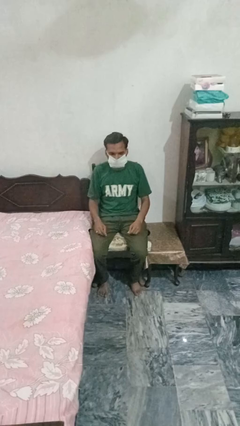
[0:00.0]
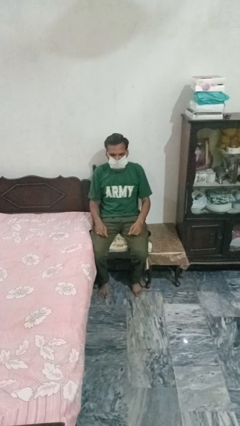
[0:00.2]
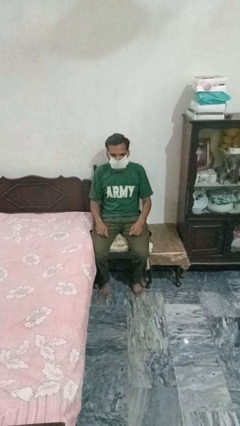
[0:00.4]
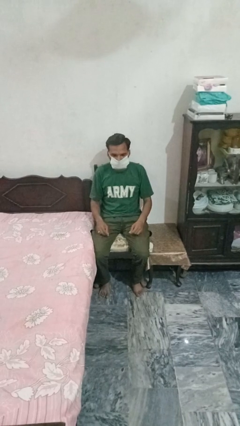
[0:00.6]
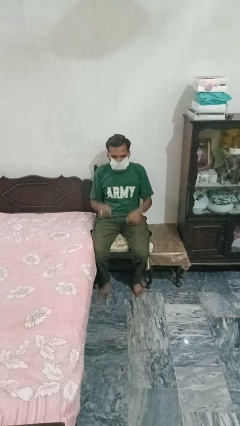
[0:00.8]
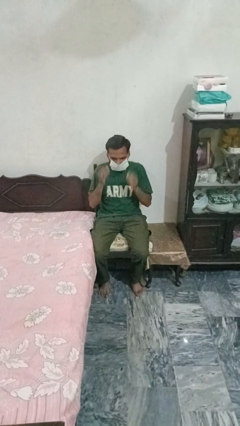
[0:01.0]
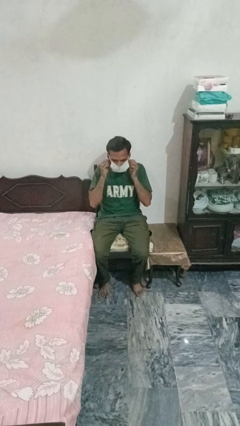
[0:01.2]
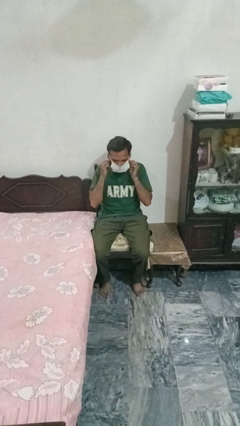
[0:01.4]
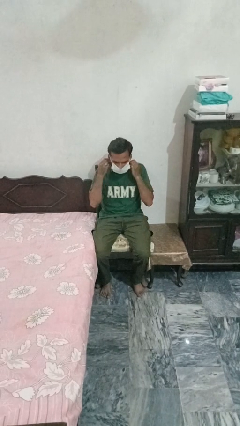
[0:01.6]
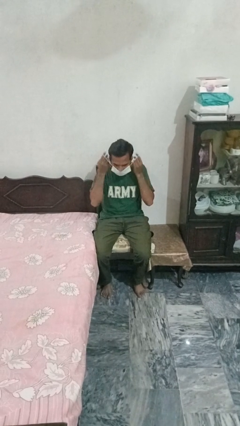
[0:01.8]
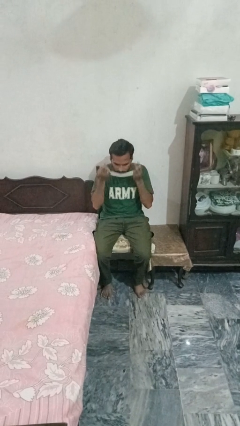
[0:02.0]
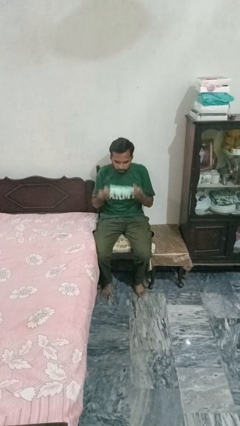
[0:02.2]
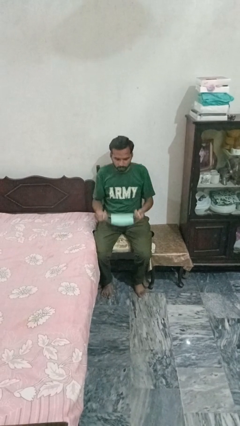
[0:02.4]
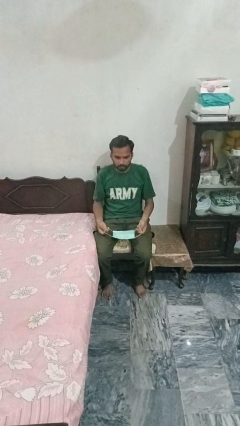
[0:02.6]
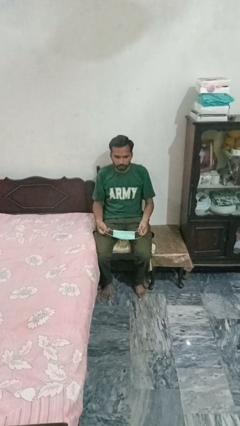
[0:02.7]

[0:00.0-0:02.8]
person takes off facemask

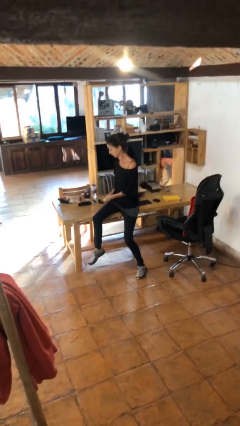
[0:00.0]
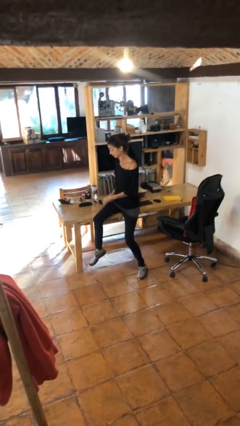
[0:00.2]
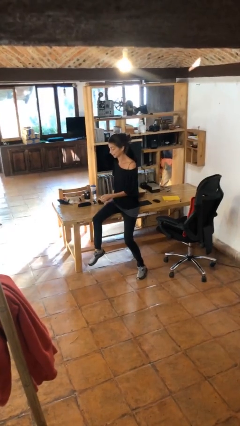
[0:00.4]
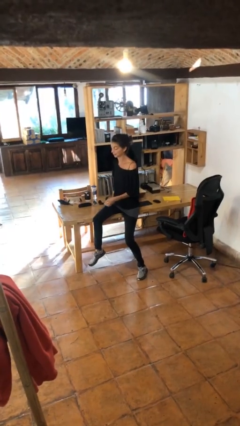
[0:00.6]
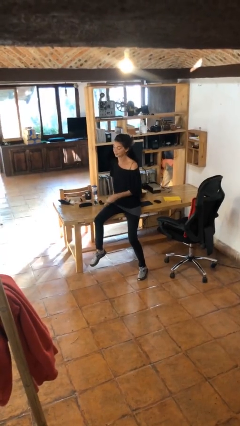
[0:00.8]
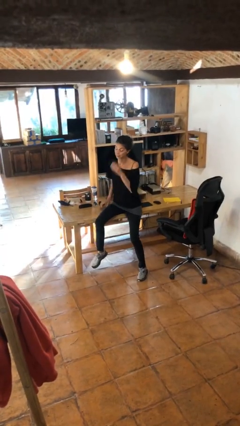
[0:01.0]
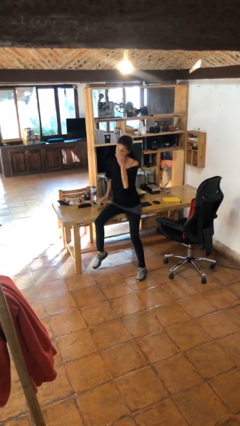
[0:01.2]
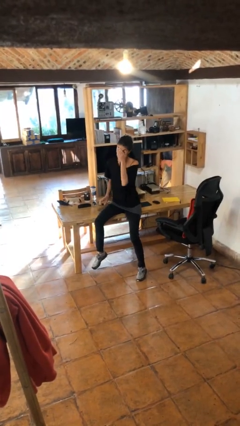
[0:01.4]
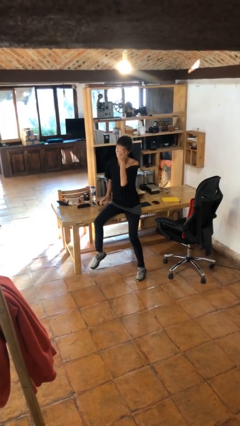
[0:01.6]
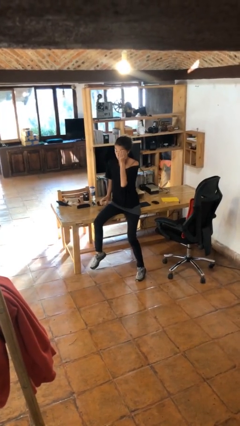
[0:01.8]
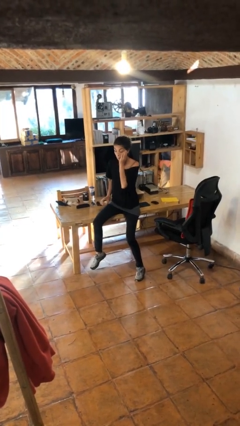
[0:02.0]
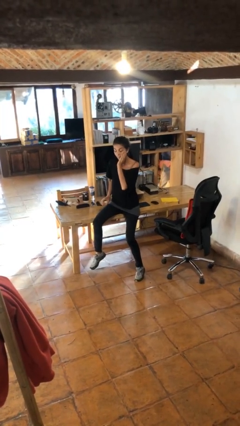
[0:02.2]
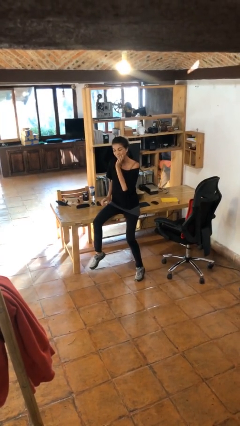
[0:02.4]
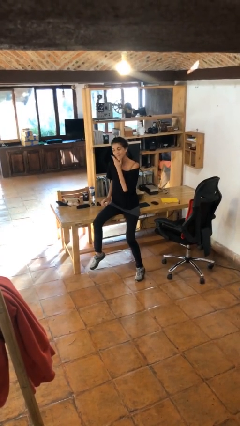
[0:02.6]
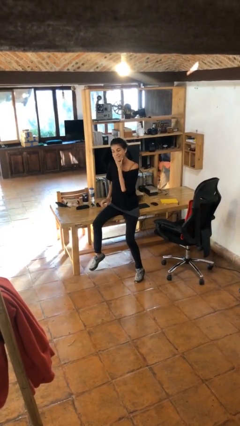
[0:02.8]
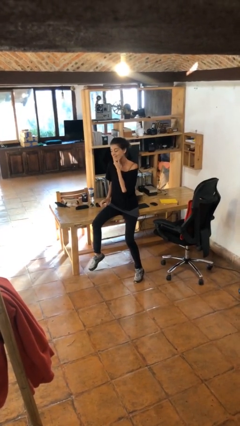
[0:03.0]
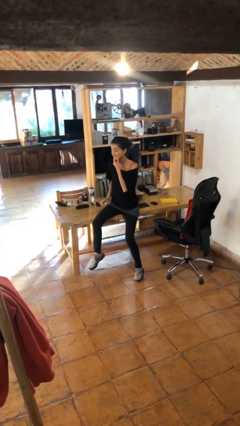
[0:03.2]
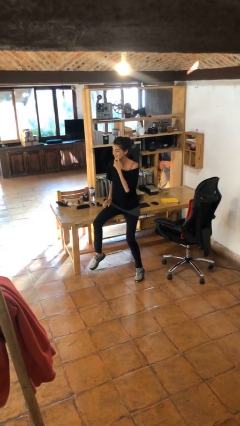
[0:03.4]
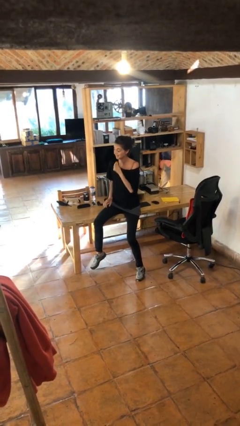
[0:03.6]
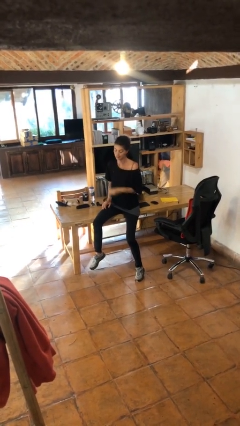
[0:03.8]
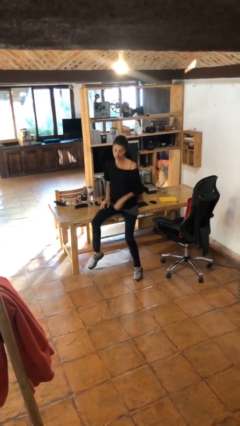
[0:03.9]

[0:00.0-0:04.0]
person scratches face

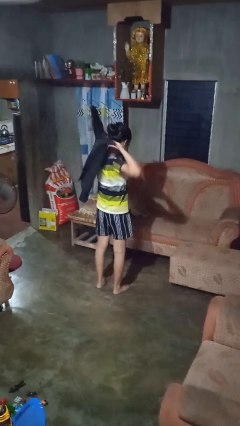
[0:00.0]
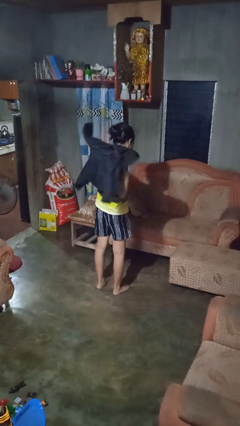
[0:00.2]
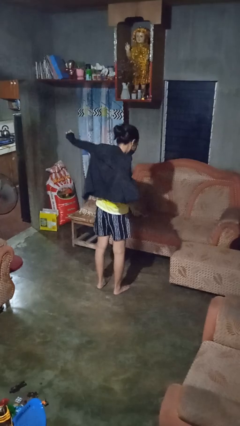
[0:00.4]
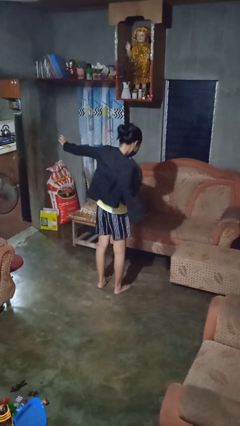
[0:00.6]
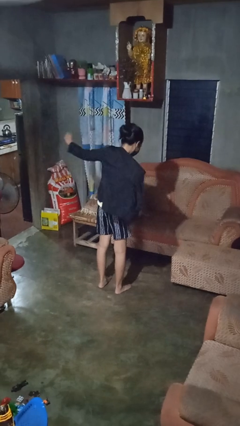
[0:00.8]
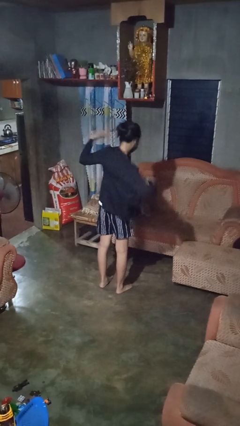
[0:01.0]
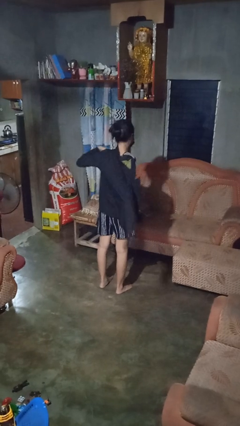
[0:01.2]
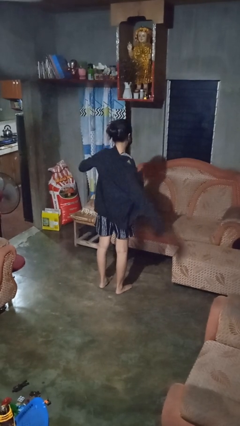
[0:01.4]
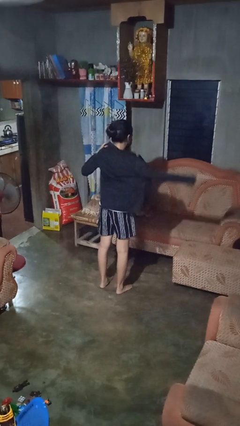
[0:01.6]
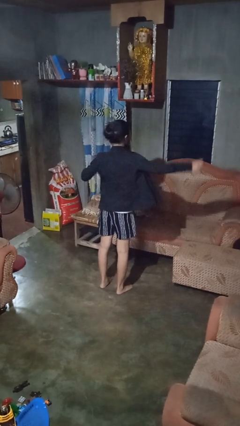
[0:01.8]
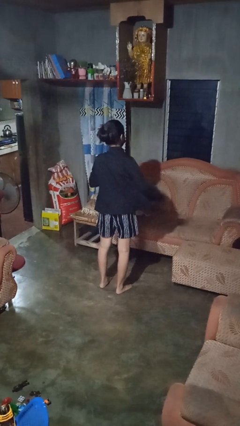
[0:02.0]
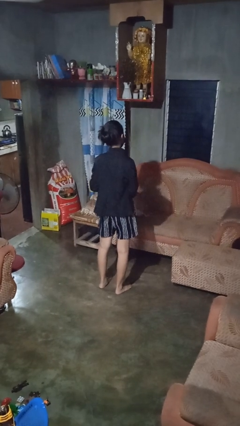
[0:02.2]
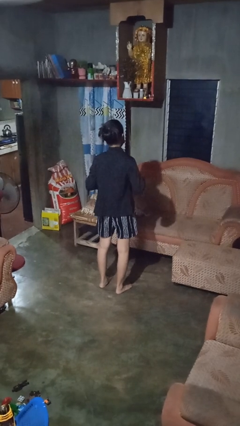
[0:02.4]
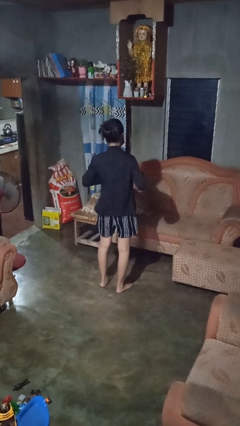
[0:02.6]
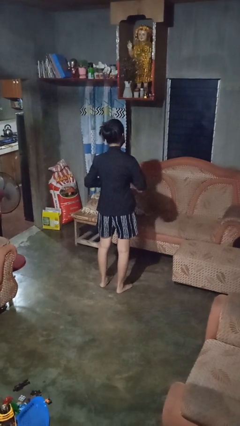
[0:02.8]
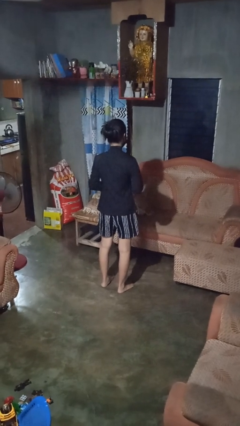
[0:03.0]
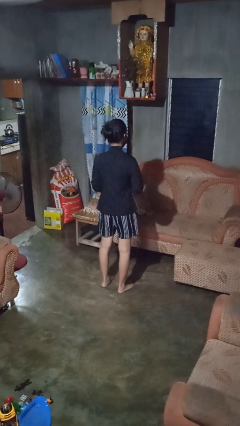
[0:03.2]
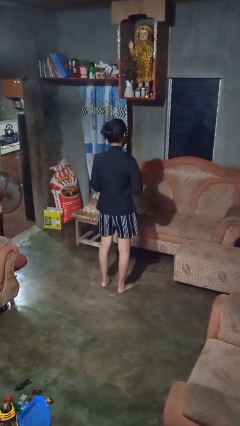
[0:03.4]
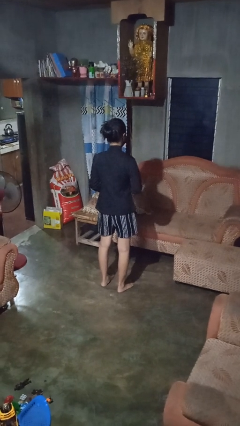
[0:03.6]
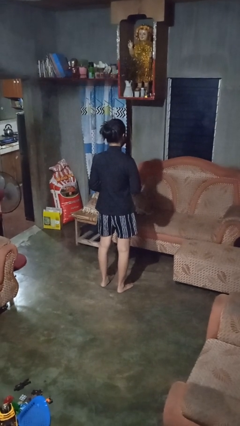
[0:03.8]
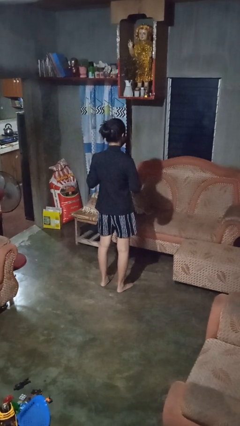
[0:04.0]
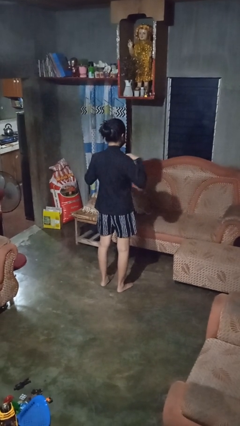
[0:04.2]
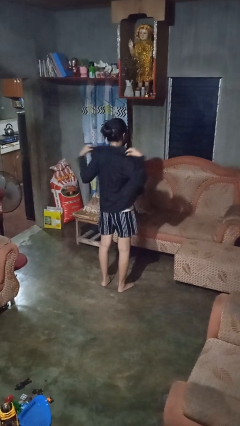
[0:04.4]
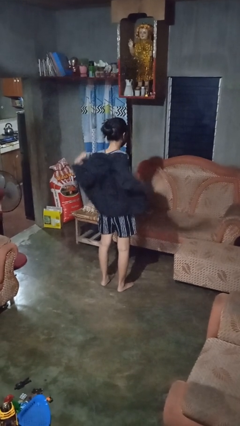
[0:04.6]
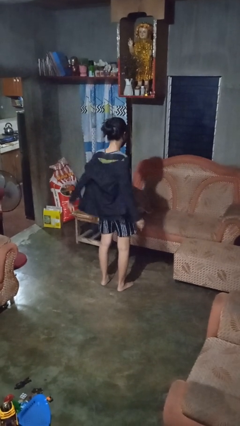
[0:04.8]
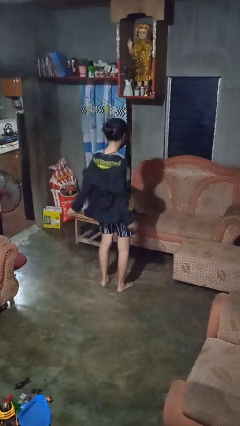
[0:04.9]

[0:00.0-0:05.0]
person puts on shirt

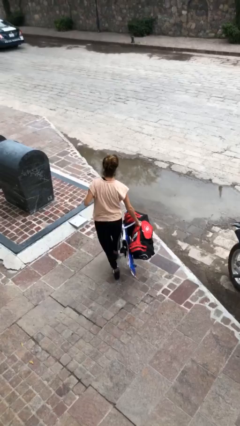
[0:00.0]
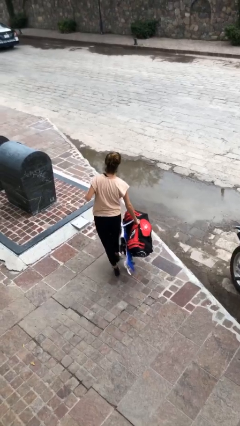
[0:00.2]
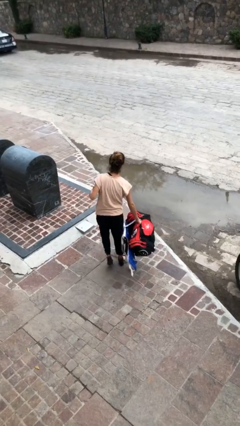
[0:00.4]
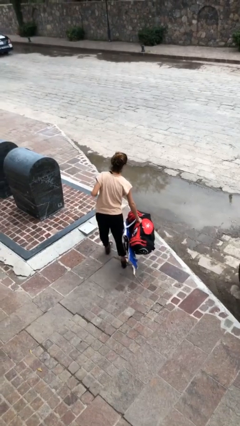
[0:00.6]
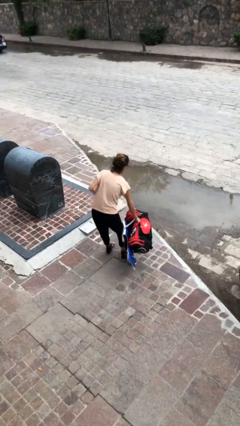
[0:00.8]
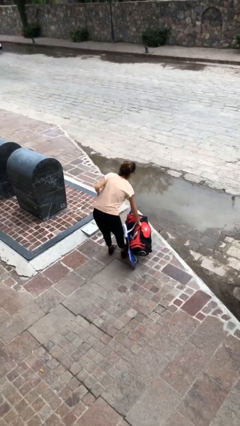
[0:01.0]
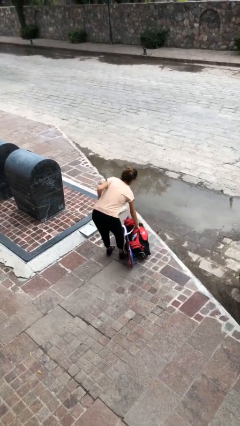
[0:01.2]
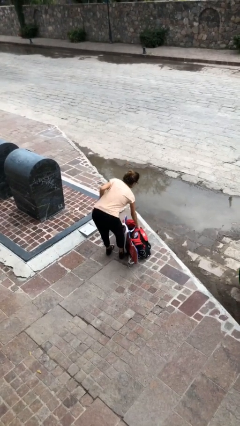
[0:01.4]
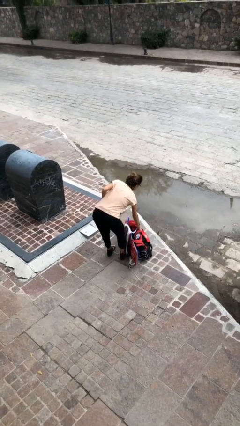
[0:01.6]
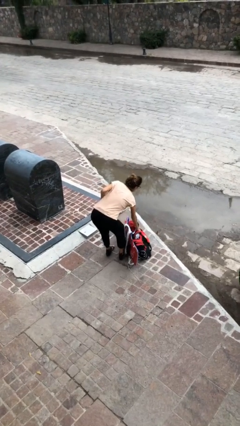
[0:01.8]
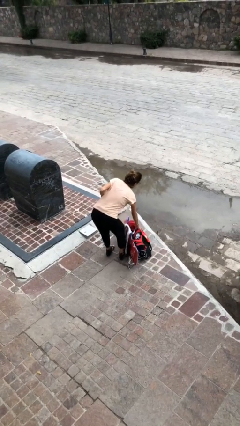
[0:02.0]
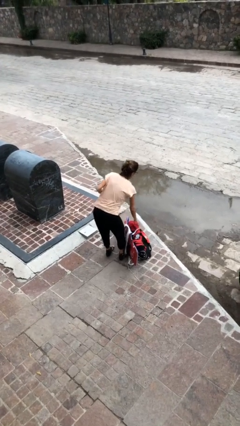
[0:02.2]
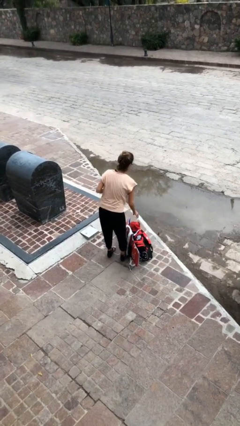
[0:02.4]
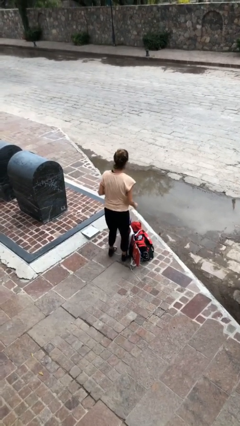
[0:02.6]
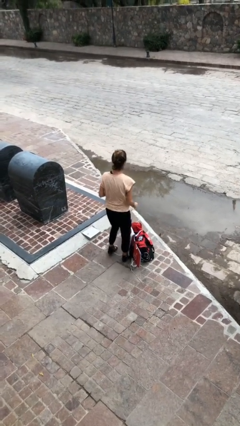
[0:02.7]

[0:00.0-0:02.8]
person puts down object on floor

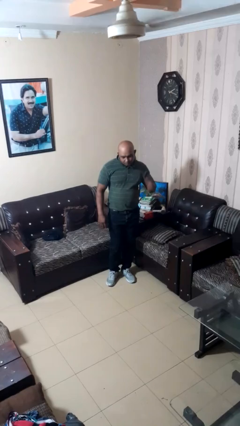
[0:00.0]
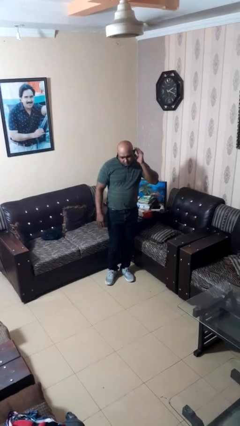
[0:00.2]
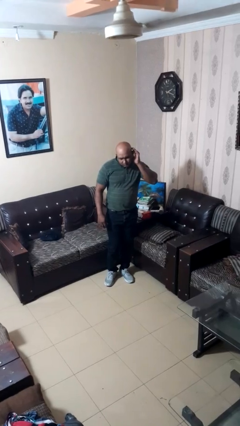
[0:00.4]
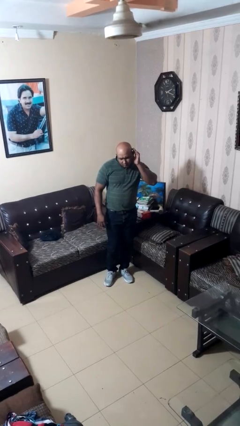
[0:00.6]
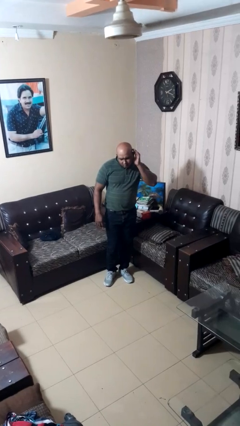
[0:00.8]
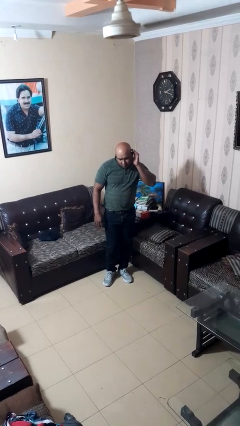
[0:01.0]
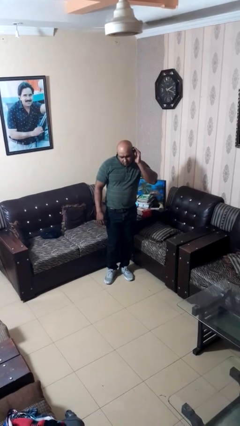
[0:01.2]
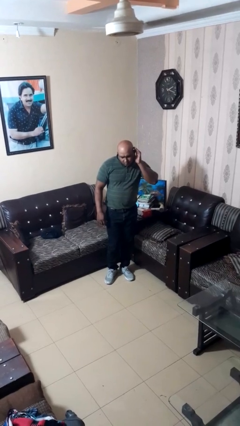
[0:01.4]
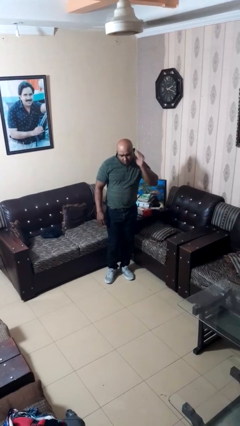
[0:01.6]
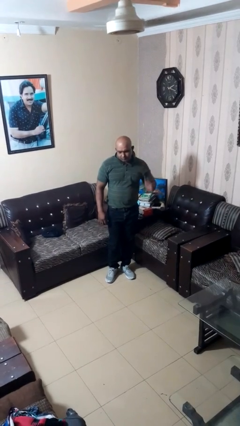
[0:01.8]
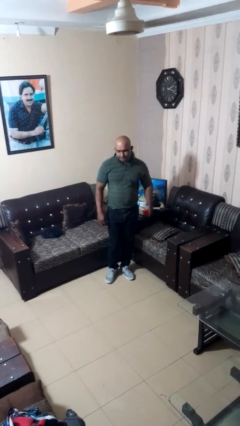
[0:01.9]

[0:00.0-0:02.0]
person gestures listen closely

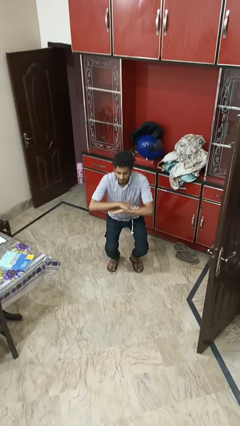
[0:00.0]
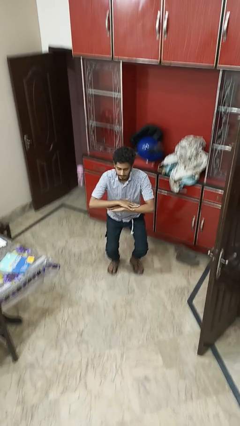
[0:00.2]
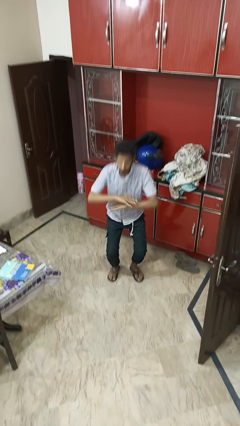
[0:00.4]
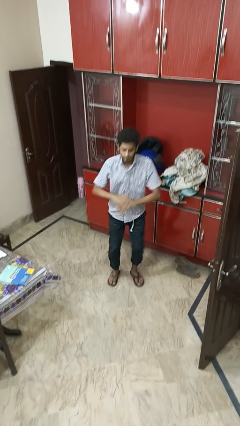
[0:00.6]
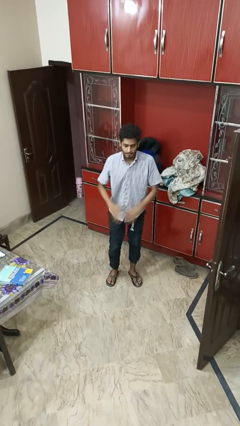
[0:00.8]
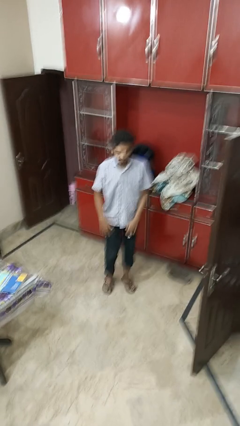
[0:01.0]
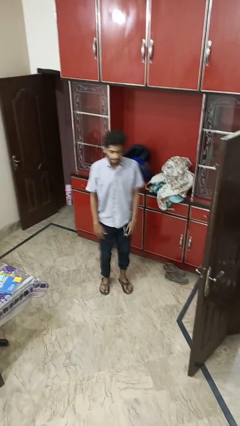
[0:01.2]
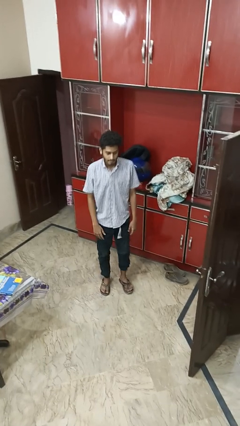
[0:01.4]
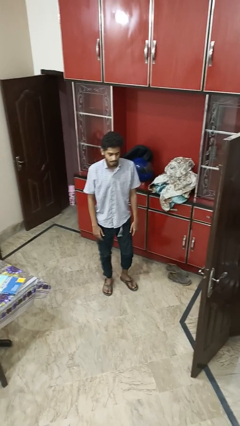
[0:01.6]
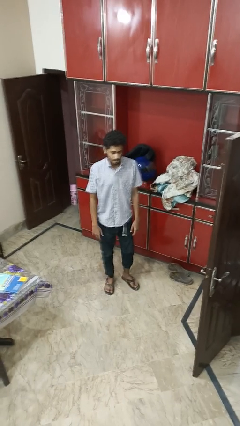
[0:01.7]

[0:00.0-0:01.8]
person stands up
